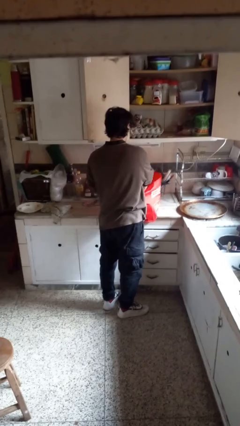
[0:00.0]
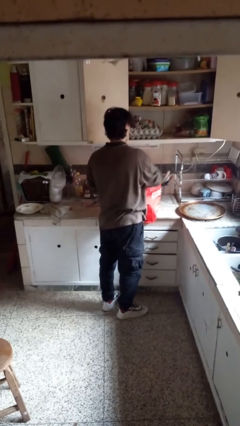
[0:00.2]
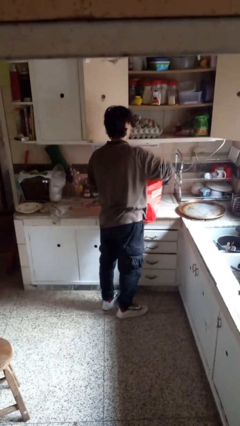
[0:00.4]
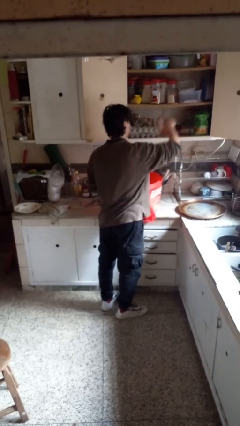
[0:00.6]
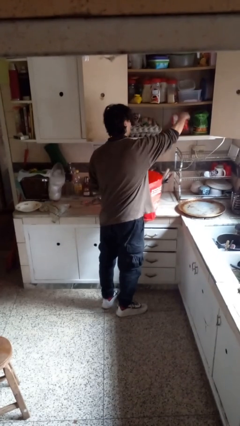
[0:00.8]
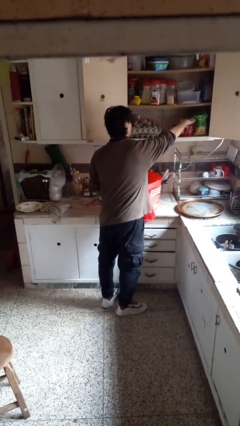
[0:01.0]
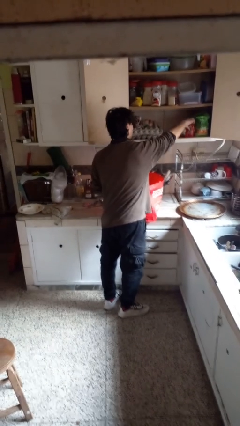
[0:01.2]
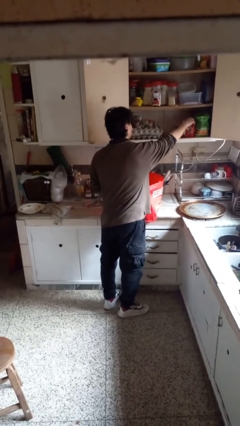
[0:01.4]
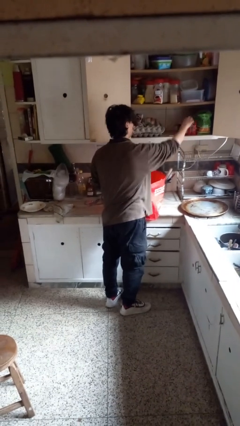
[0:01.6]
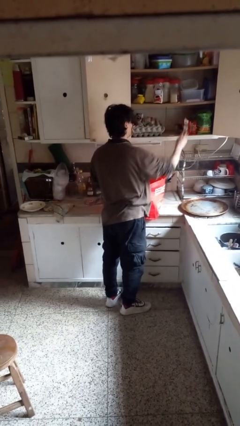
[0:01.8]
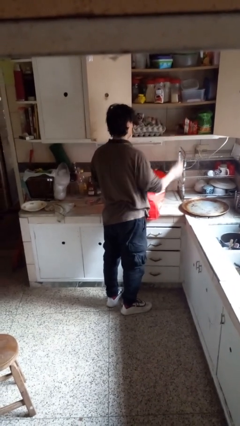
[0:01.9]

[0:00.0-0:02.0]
person loads groceries into cabinet

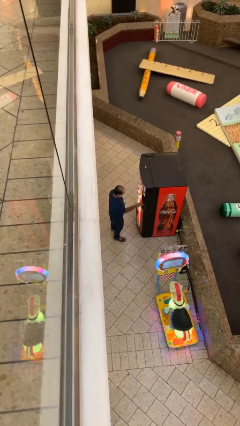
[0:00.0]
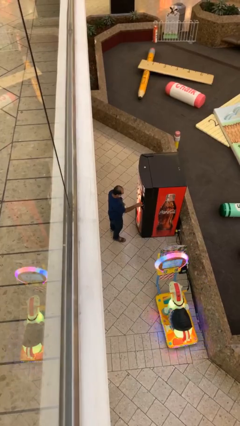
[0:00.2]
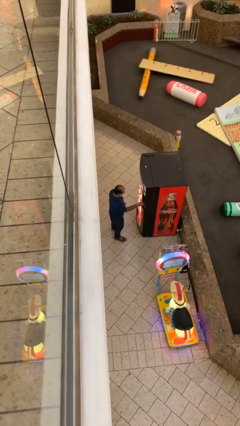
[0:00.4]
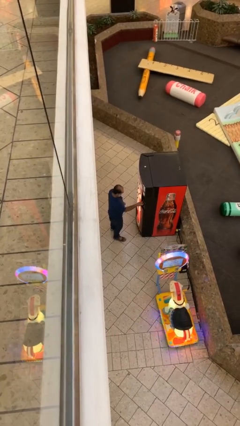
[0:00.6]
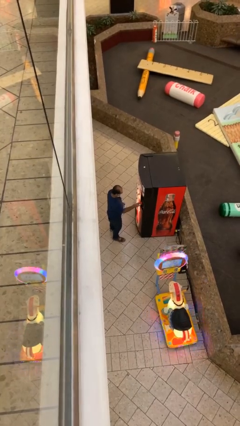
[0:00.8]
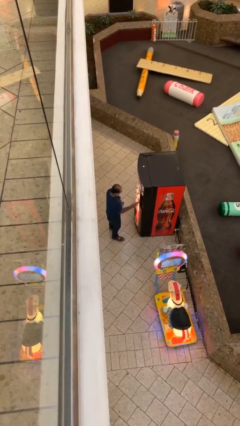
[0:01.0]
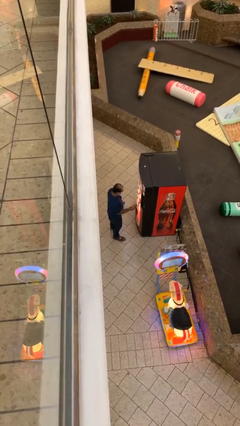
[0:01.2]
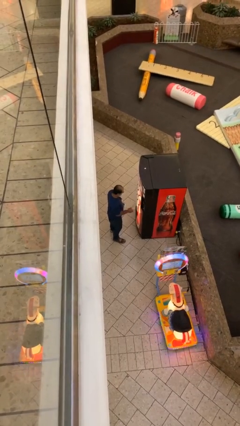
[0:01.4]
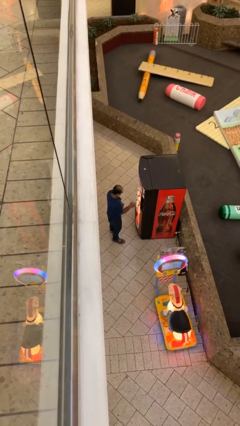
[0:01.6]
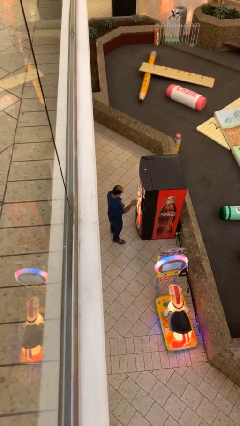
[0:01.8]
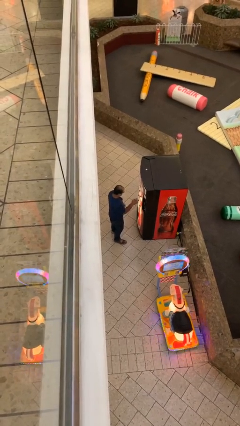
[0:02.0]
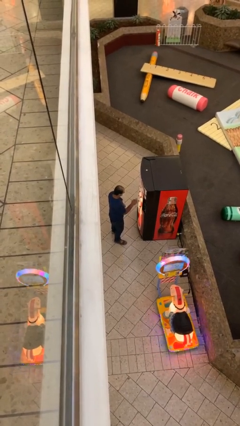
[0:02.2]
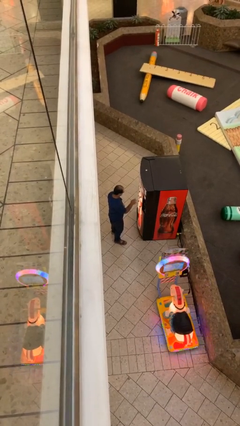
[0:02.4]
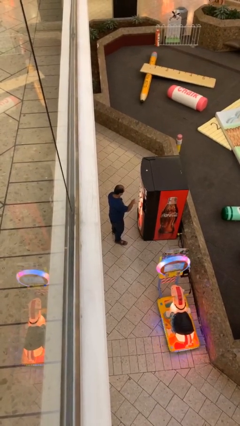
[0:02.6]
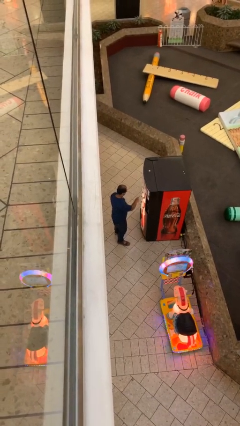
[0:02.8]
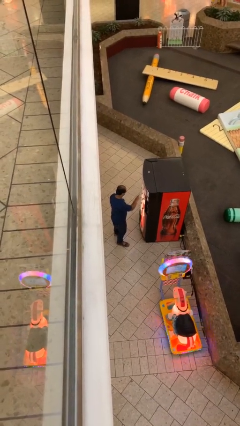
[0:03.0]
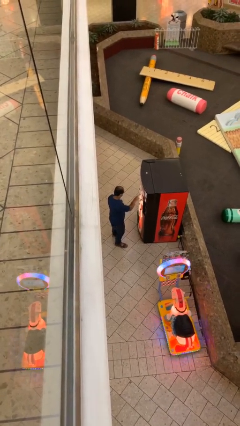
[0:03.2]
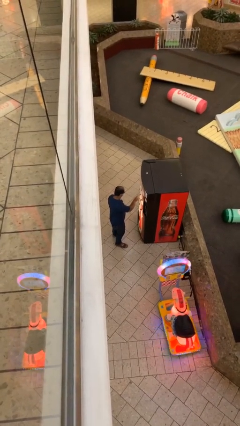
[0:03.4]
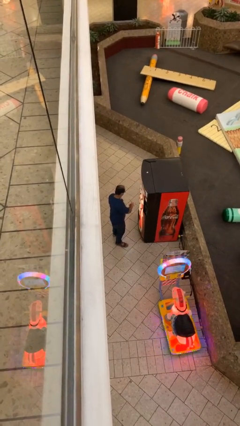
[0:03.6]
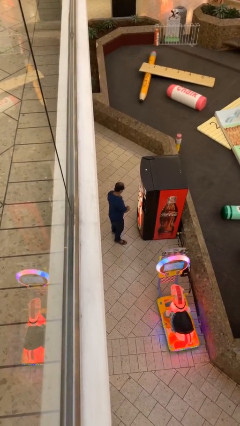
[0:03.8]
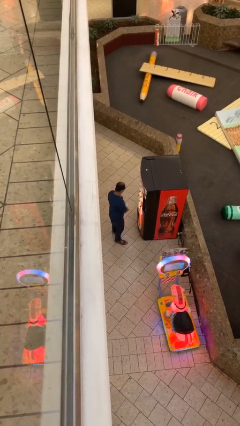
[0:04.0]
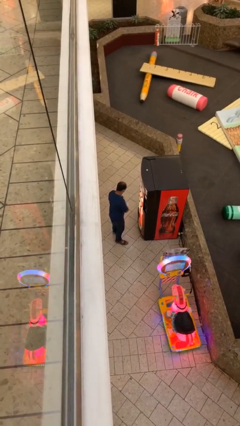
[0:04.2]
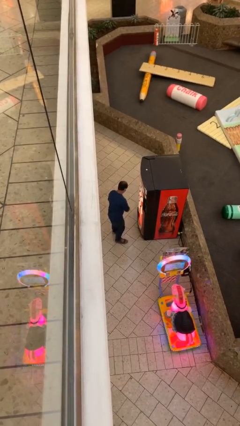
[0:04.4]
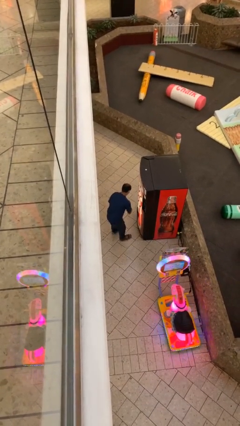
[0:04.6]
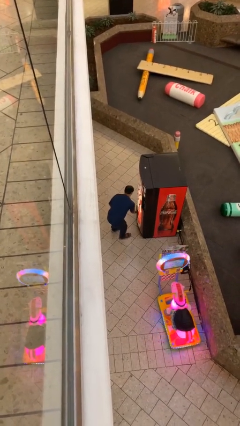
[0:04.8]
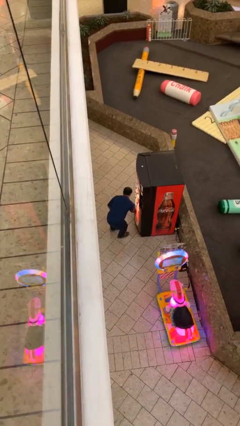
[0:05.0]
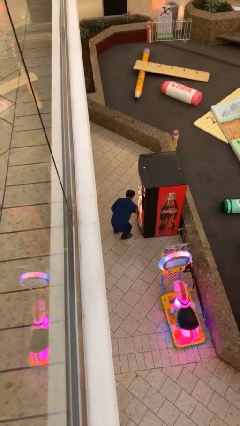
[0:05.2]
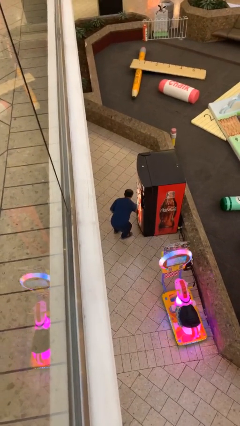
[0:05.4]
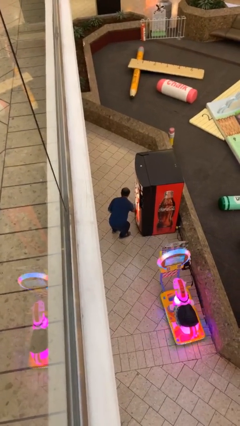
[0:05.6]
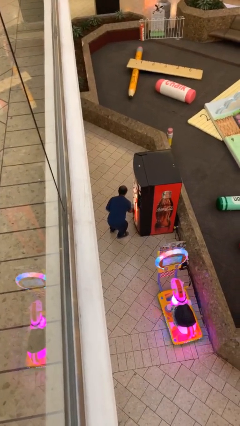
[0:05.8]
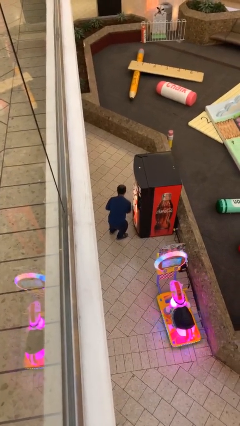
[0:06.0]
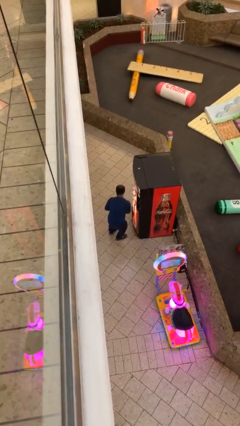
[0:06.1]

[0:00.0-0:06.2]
person purchases from machine

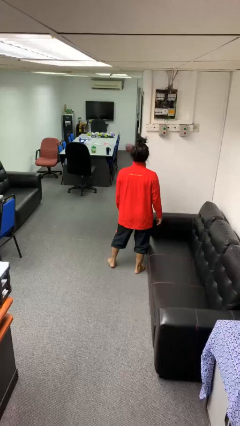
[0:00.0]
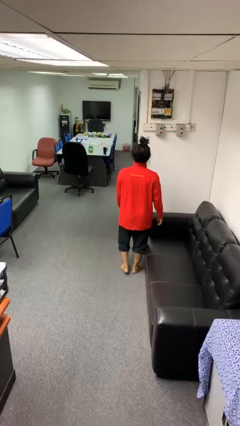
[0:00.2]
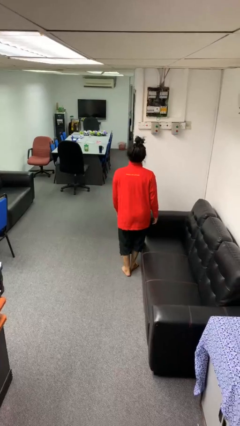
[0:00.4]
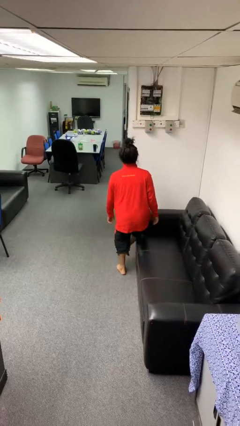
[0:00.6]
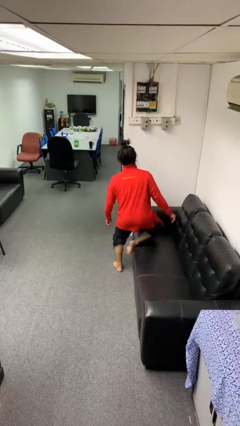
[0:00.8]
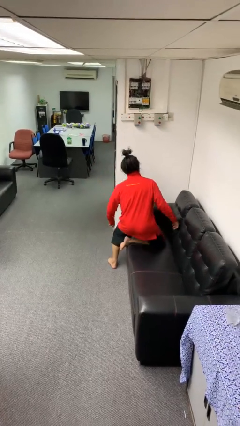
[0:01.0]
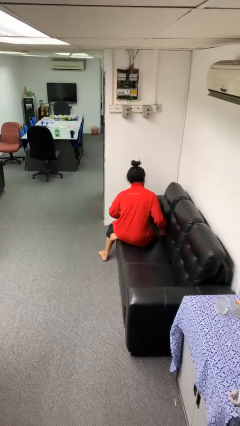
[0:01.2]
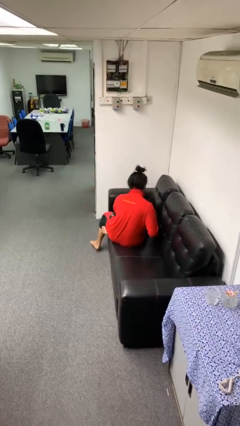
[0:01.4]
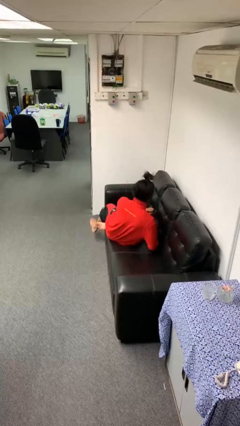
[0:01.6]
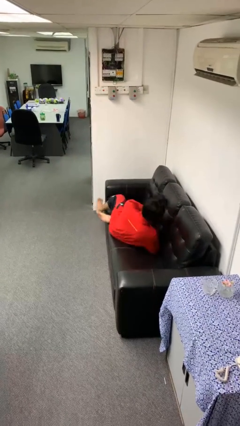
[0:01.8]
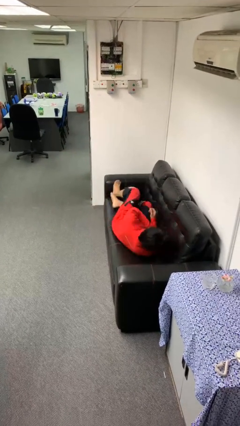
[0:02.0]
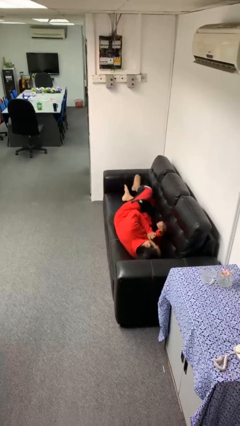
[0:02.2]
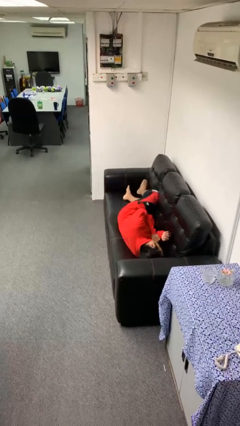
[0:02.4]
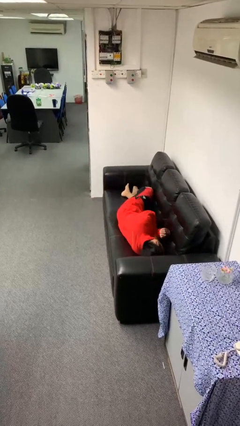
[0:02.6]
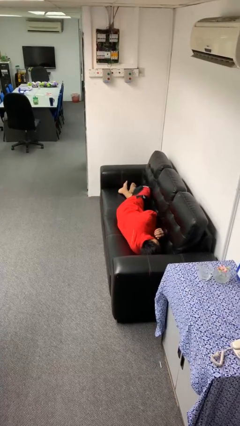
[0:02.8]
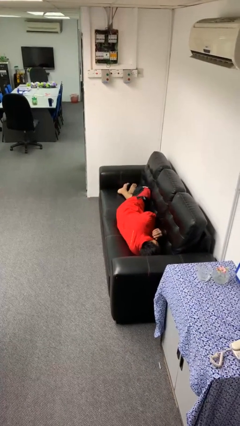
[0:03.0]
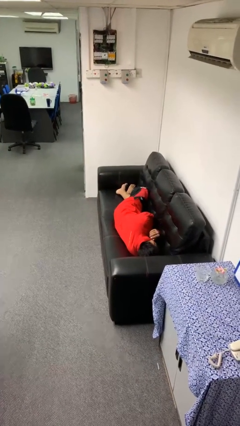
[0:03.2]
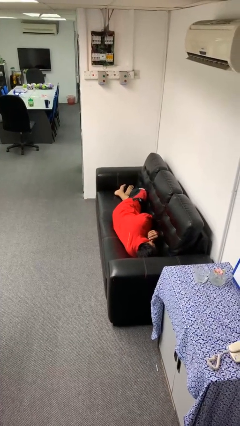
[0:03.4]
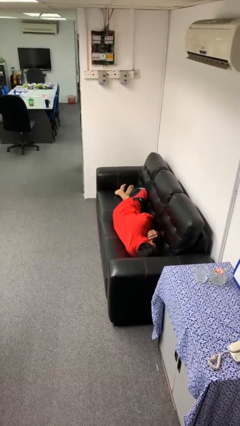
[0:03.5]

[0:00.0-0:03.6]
person lies down on couch

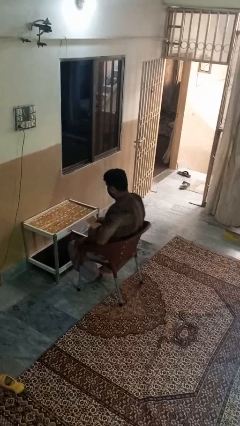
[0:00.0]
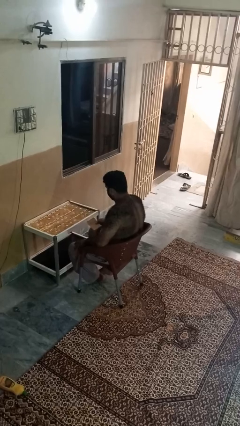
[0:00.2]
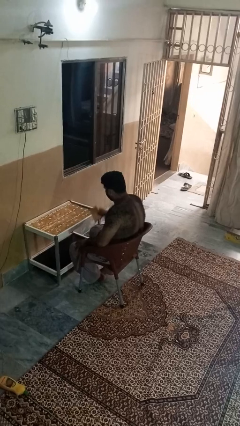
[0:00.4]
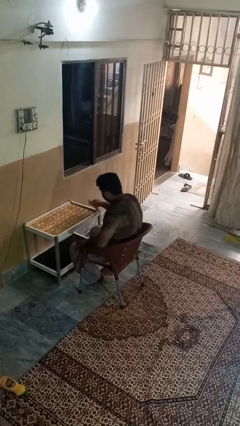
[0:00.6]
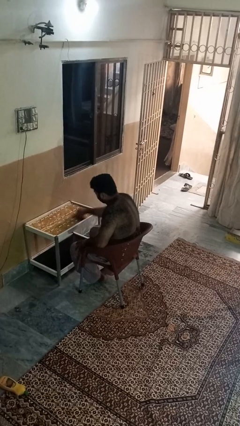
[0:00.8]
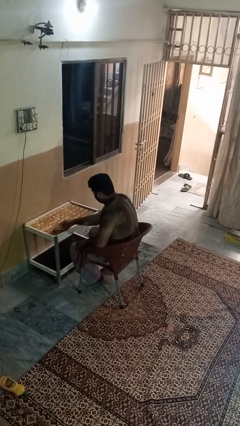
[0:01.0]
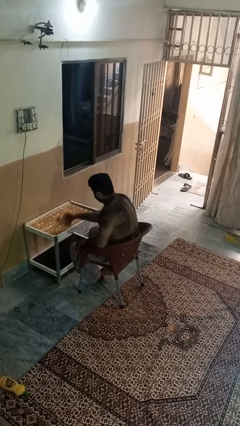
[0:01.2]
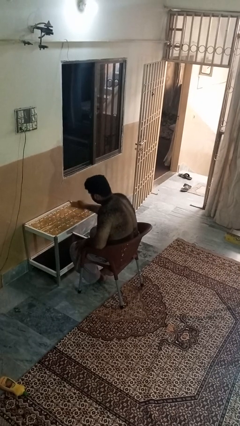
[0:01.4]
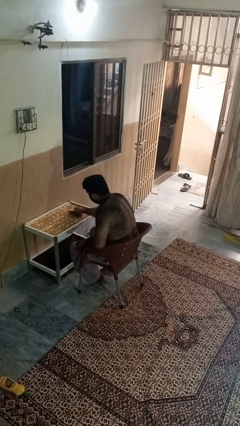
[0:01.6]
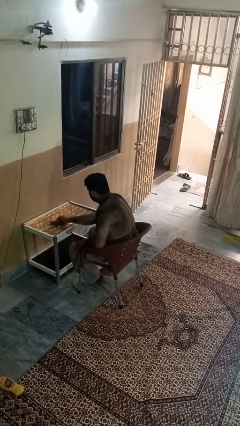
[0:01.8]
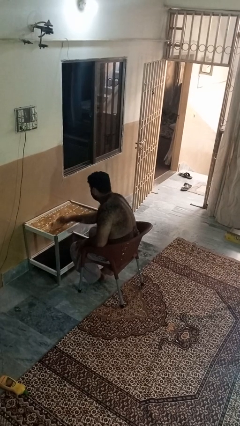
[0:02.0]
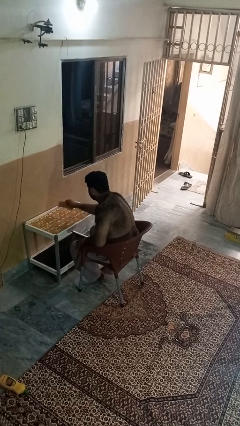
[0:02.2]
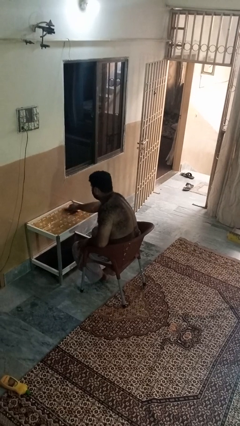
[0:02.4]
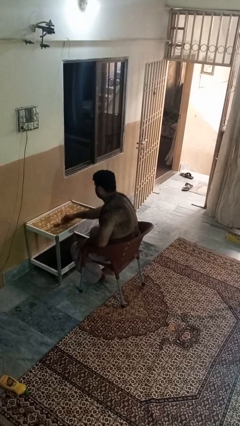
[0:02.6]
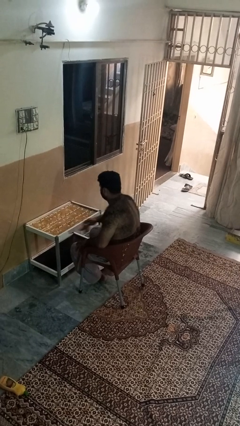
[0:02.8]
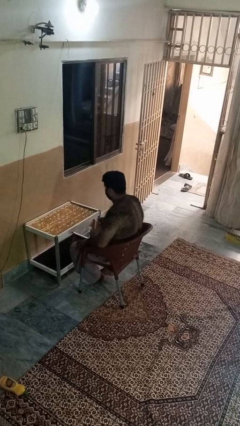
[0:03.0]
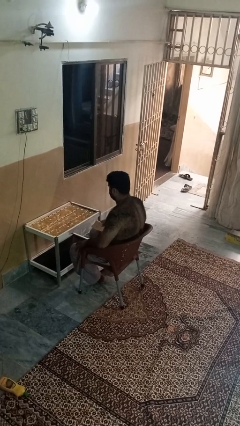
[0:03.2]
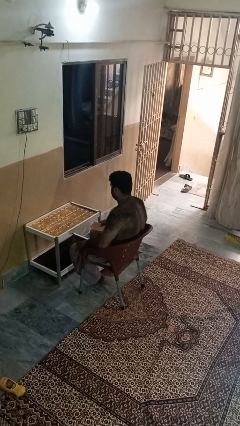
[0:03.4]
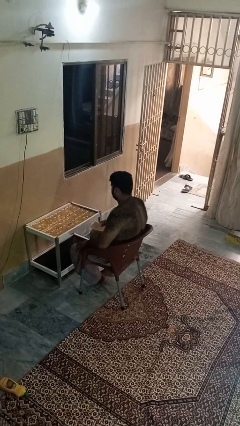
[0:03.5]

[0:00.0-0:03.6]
person cleans table with rag

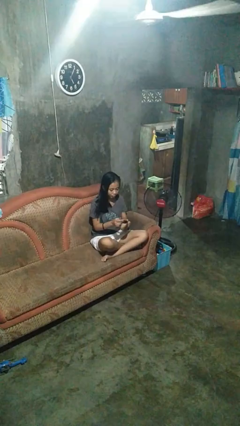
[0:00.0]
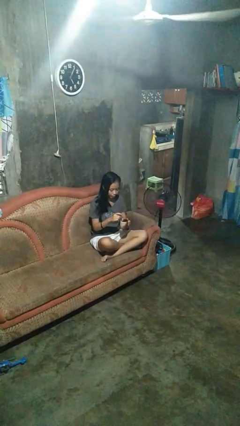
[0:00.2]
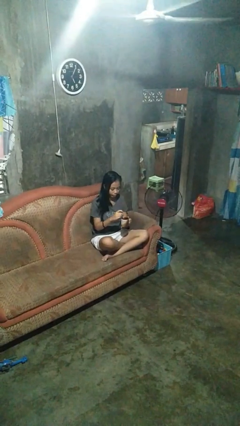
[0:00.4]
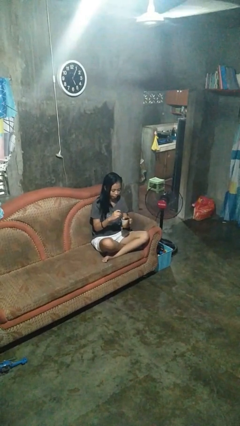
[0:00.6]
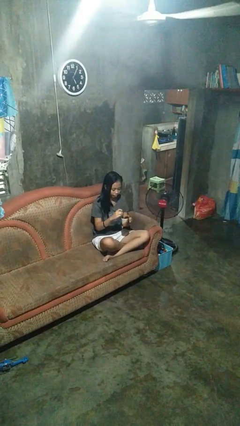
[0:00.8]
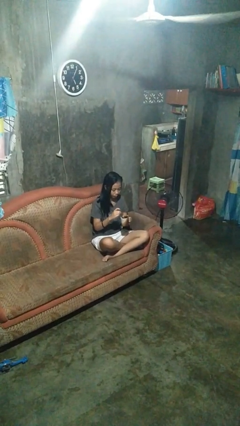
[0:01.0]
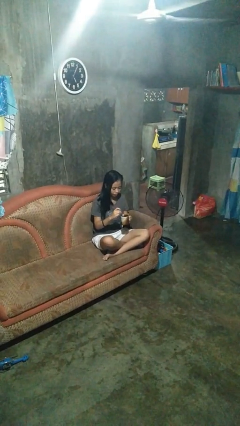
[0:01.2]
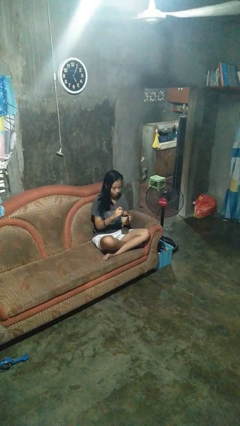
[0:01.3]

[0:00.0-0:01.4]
person stirs mug

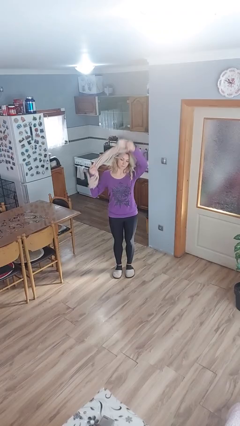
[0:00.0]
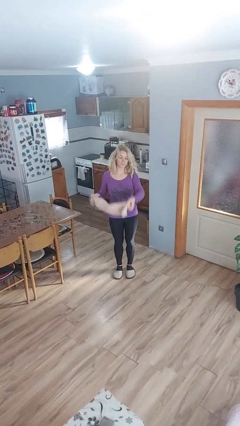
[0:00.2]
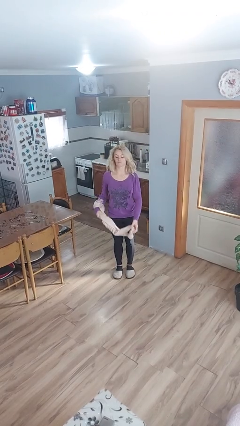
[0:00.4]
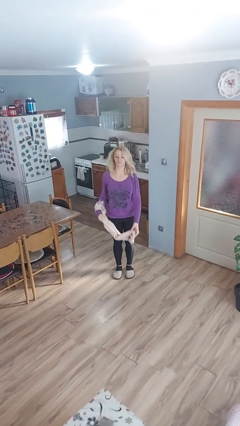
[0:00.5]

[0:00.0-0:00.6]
person takes off scarf

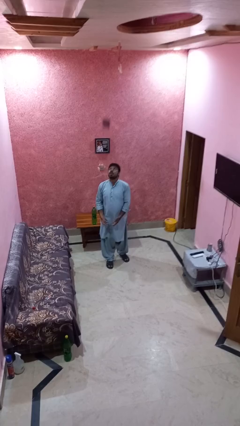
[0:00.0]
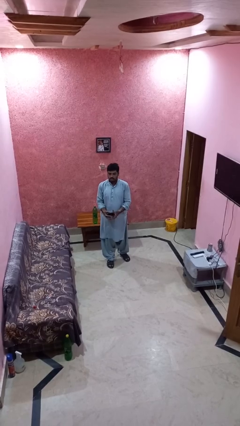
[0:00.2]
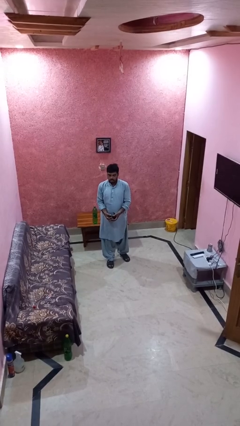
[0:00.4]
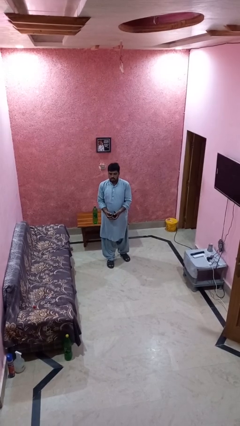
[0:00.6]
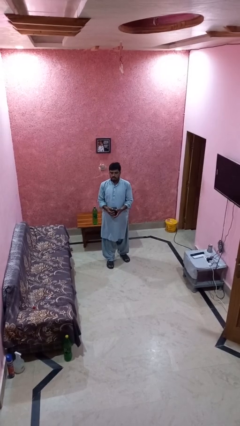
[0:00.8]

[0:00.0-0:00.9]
person catches dropped object
